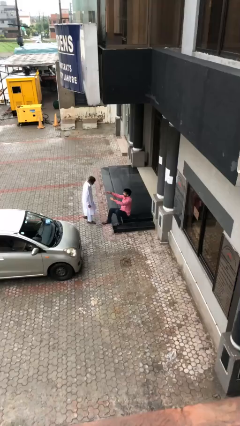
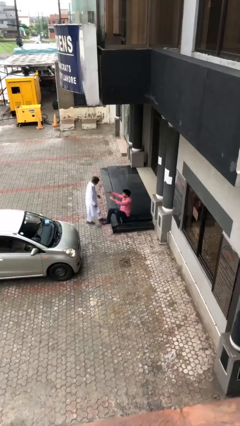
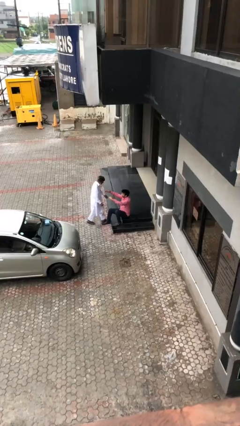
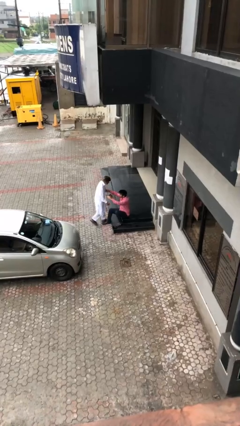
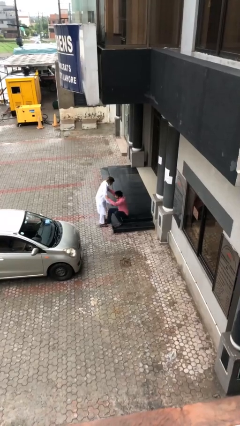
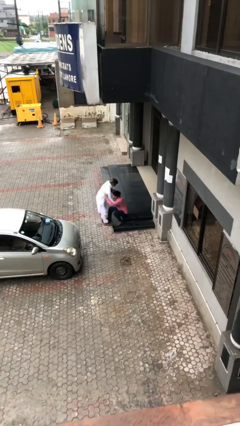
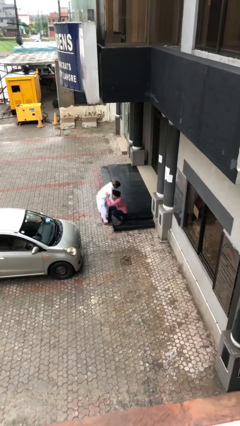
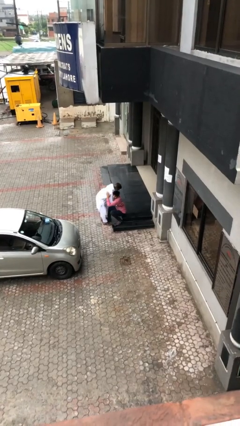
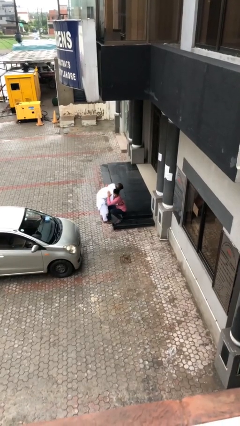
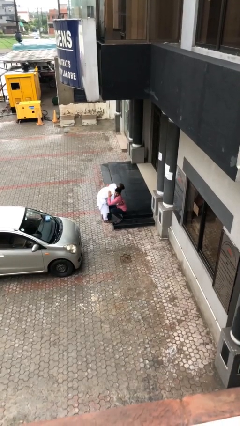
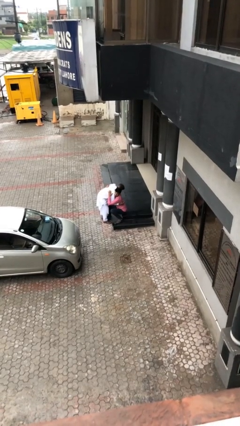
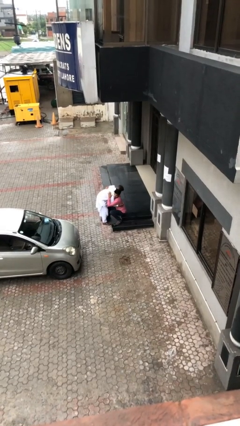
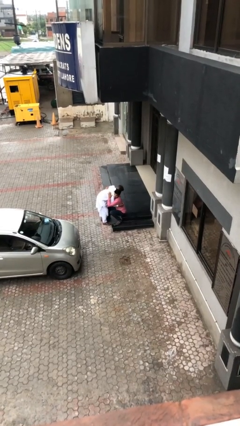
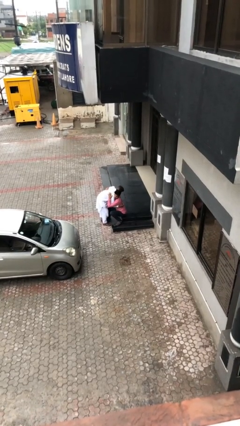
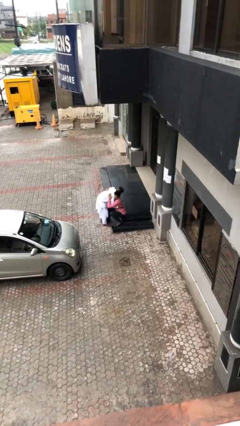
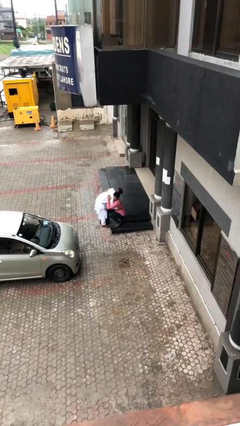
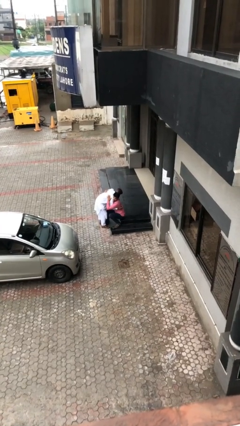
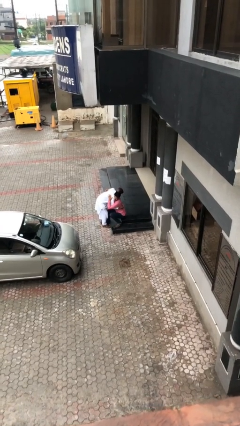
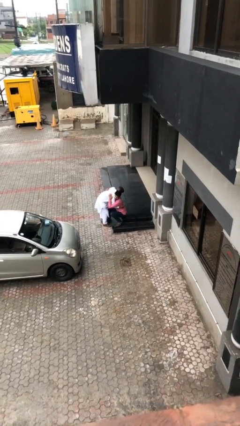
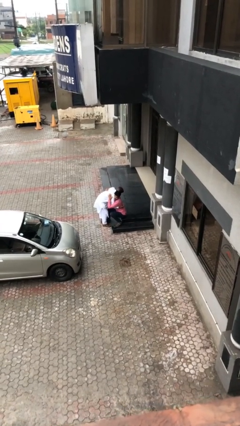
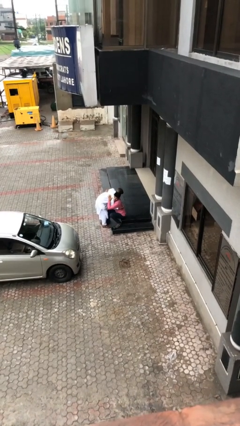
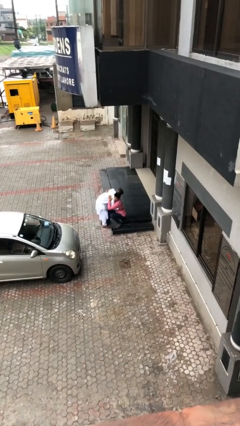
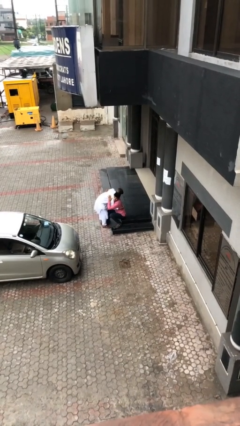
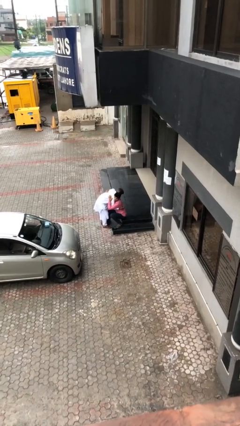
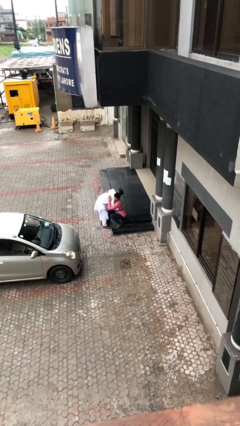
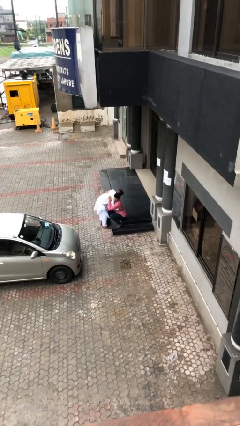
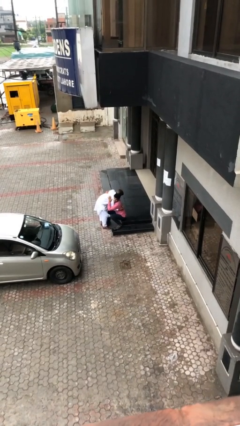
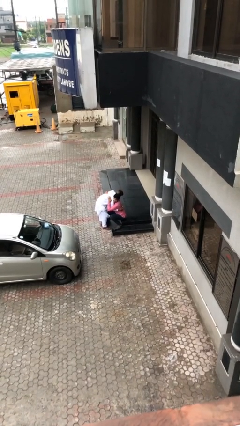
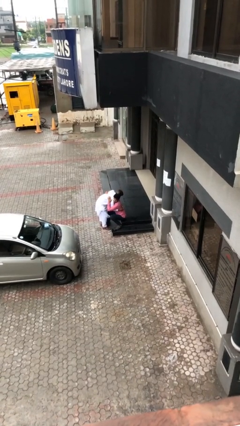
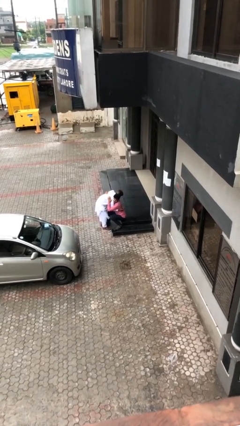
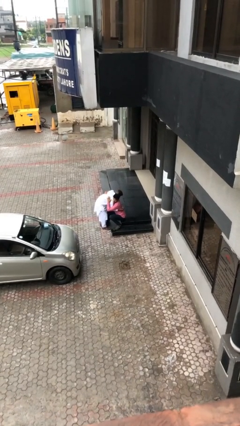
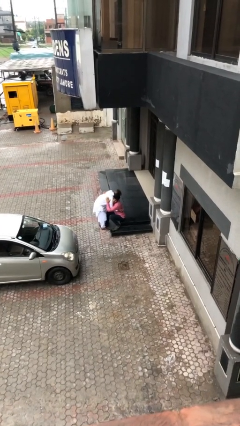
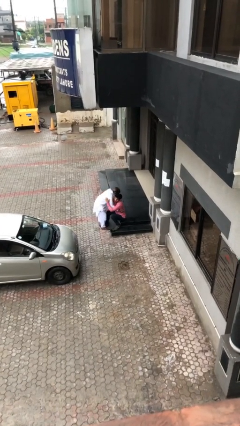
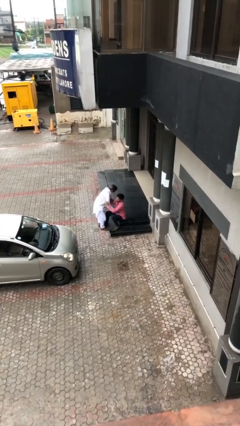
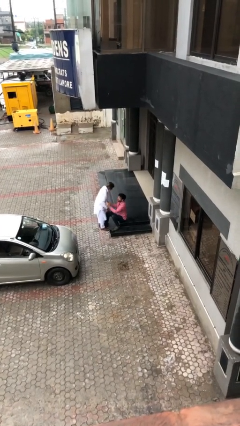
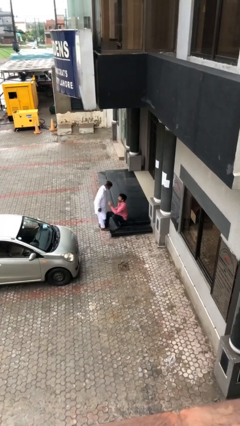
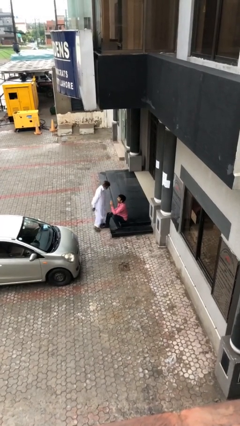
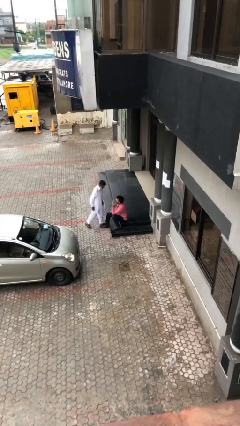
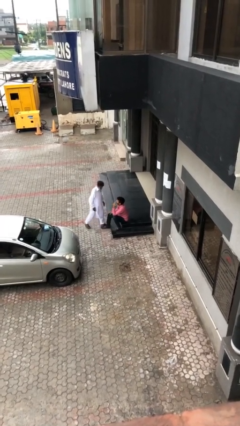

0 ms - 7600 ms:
person embraces person

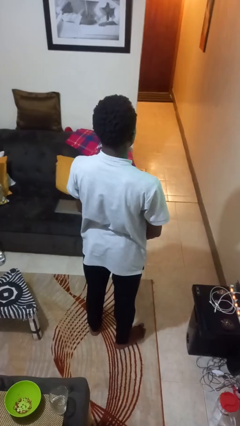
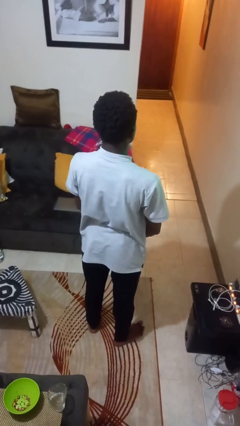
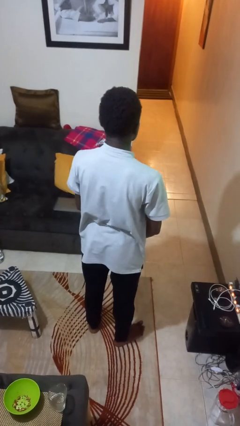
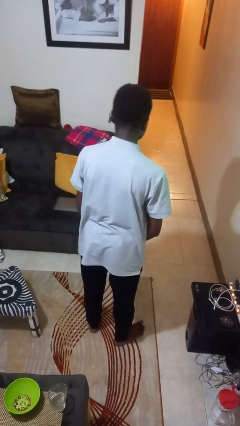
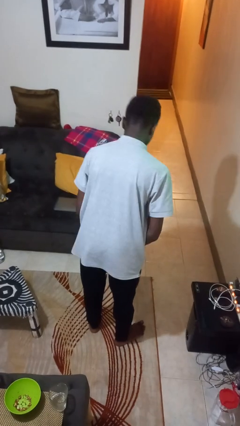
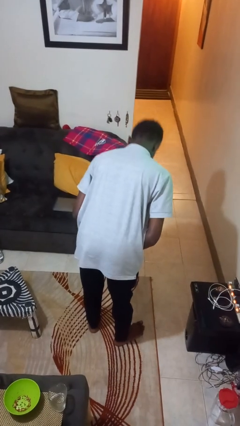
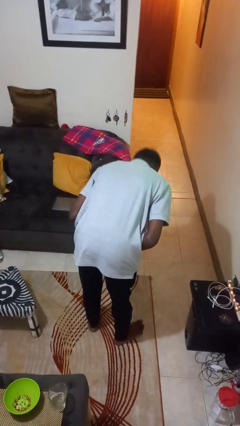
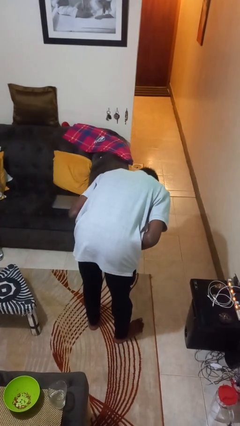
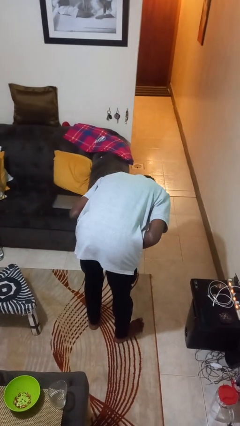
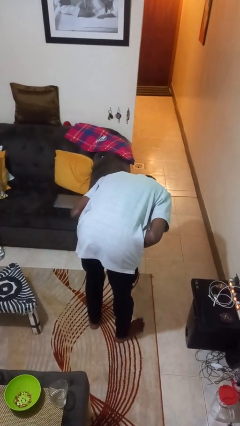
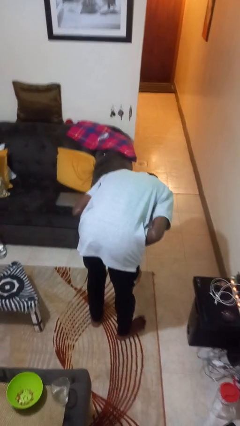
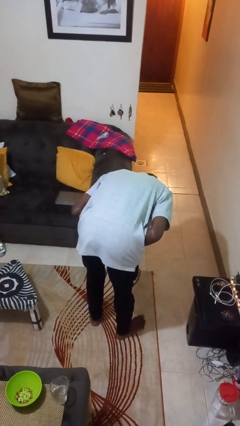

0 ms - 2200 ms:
person bows

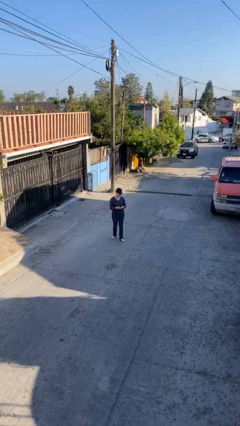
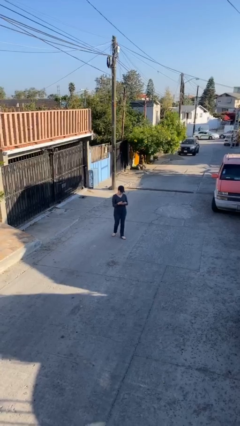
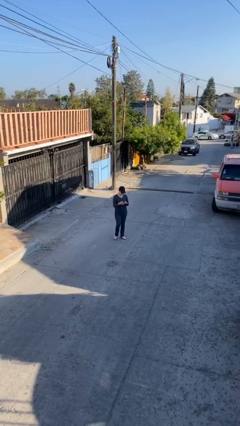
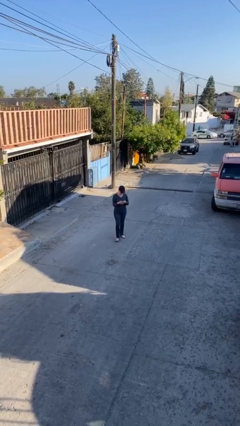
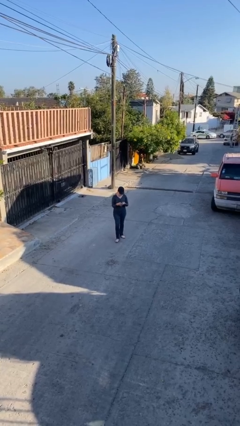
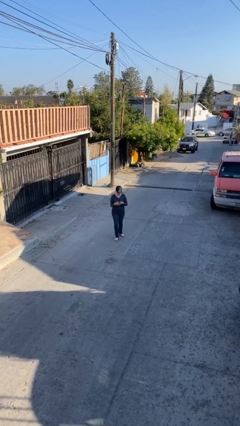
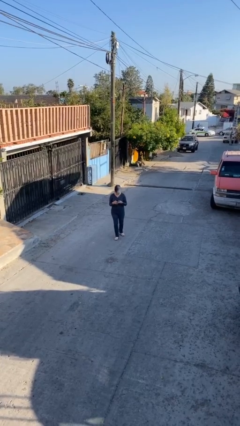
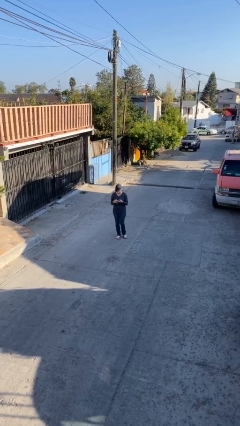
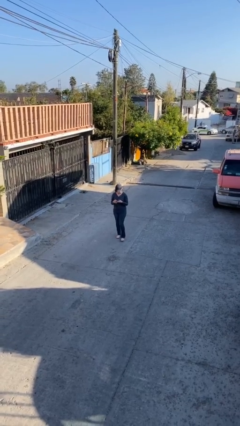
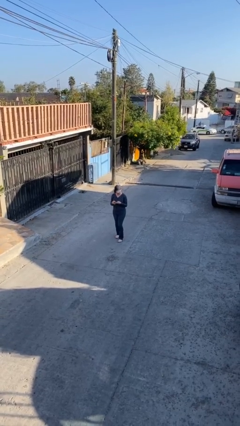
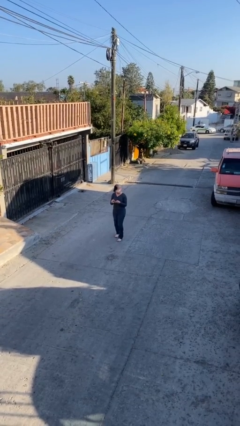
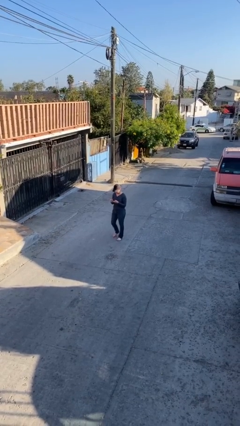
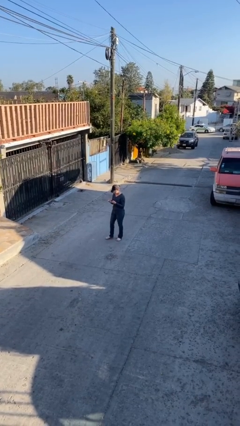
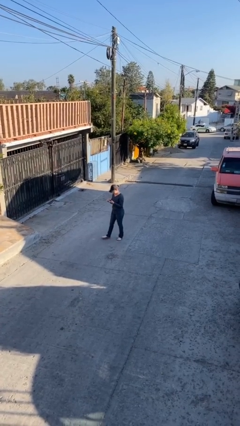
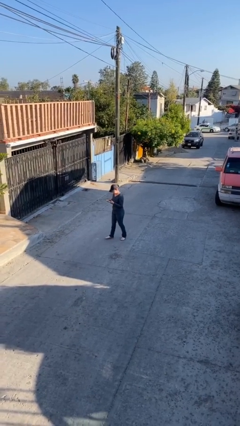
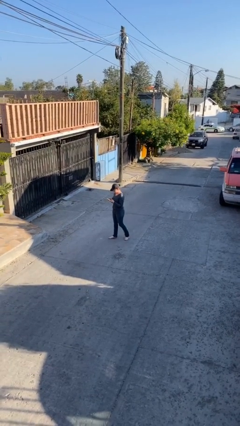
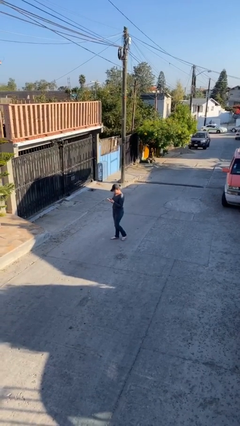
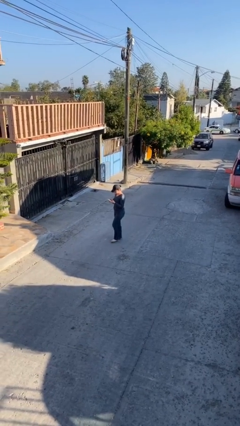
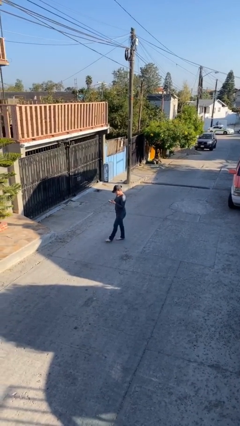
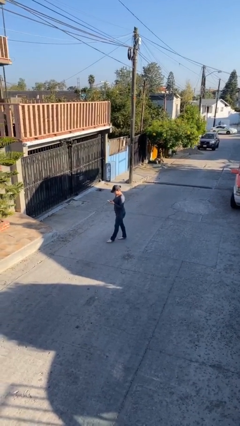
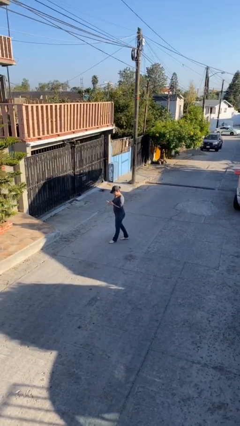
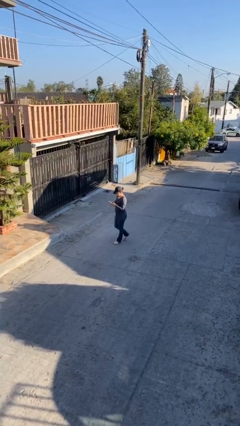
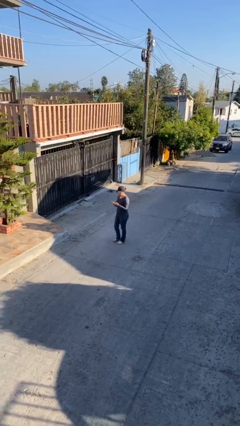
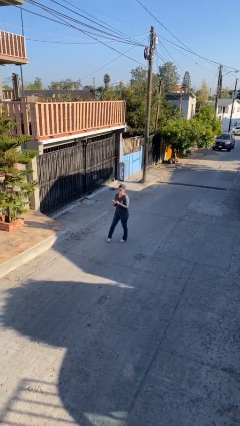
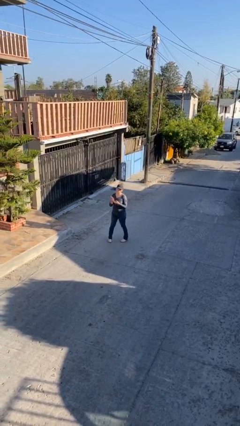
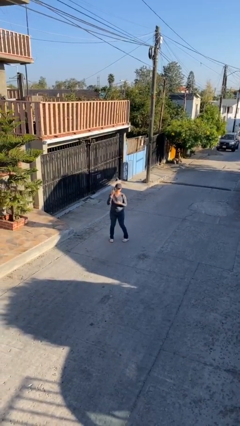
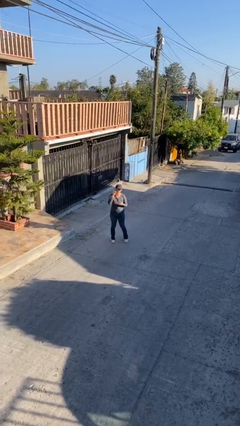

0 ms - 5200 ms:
person texts on phone

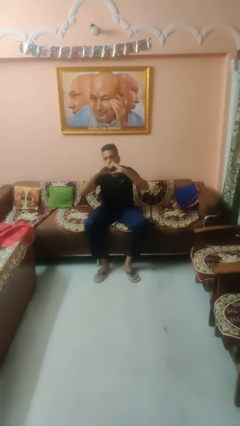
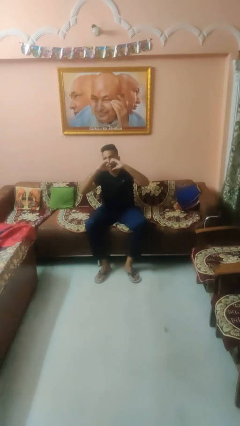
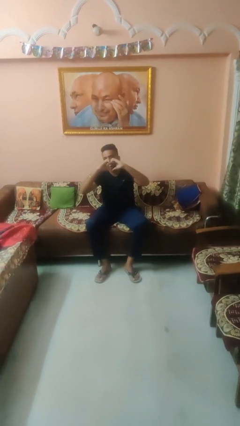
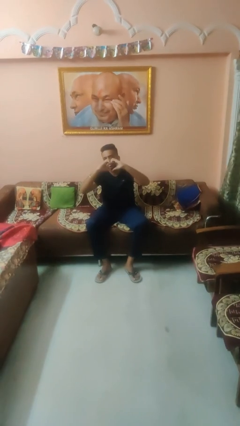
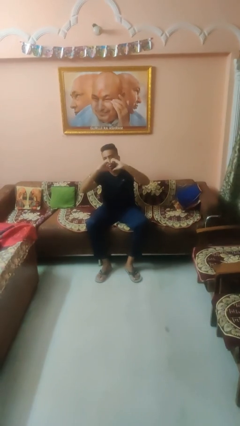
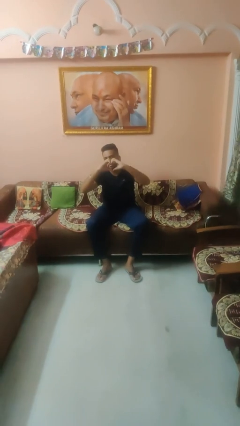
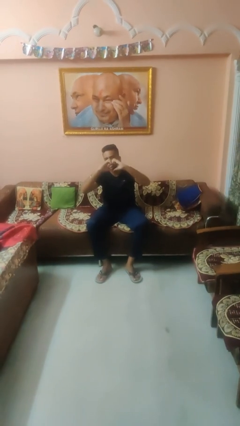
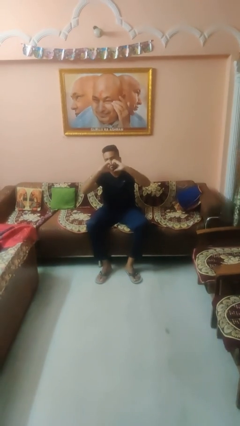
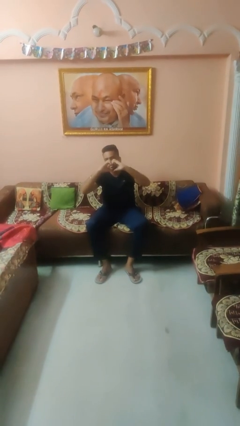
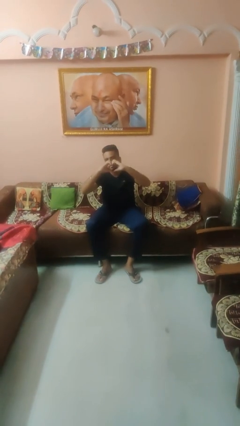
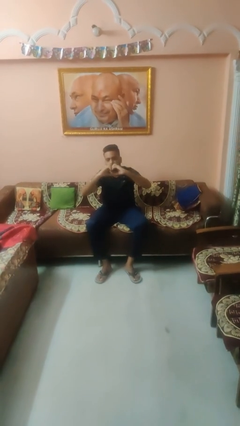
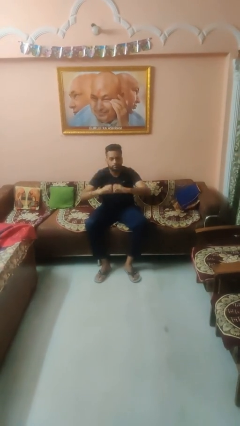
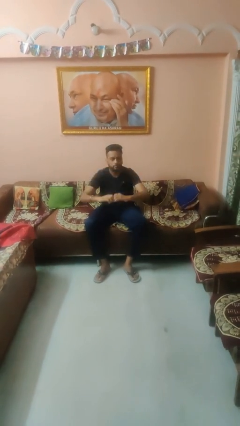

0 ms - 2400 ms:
person gestures heart

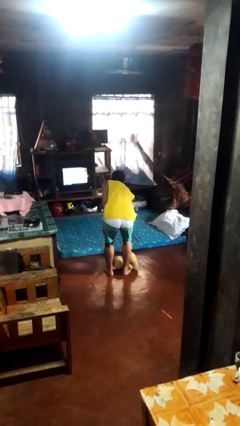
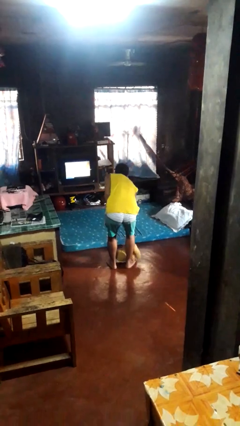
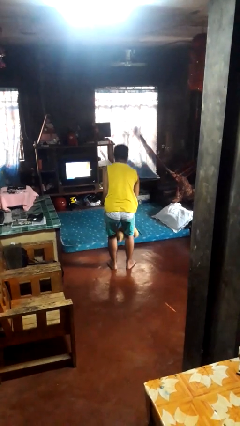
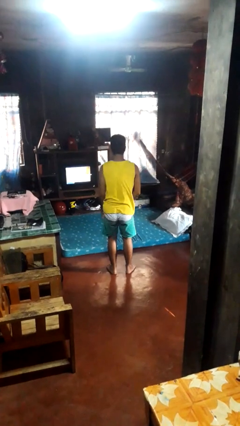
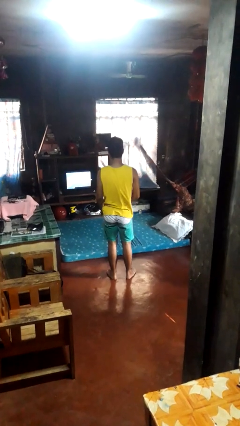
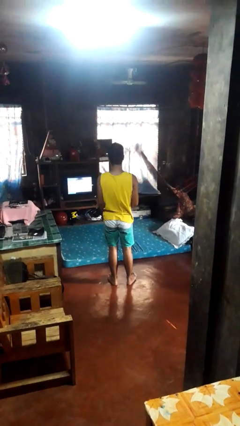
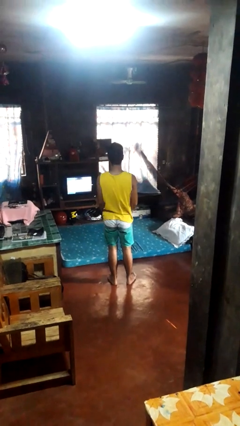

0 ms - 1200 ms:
person picks up object from bed
